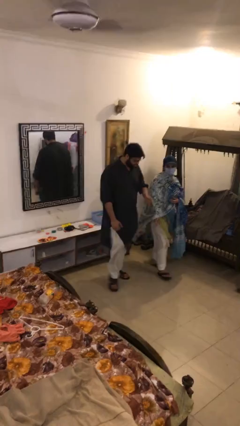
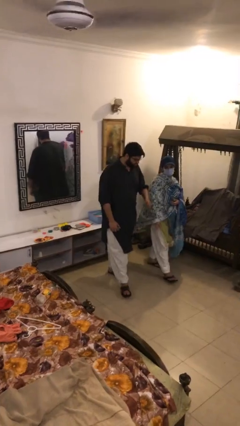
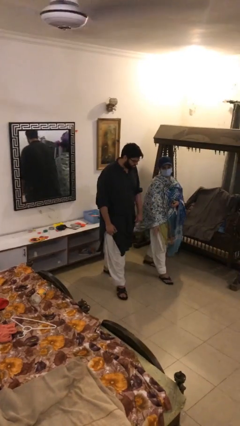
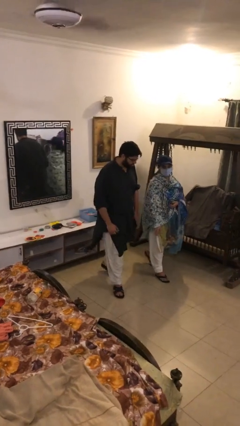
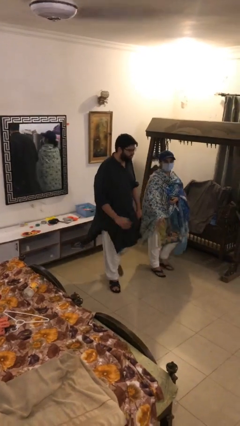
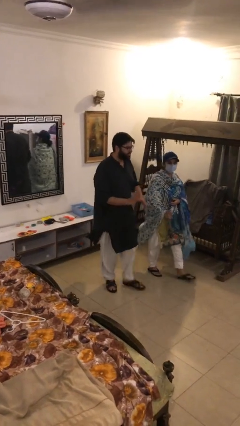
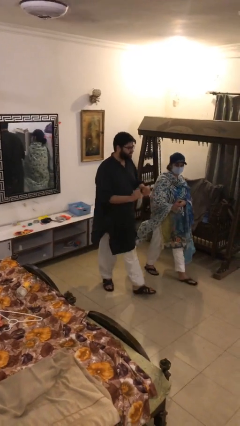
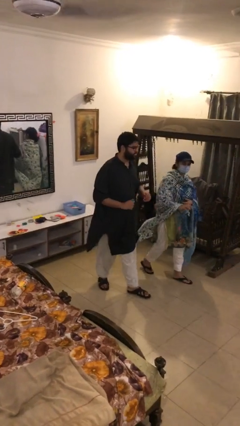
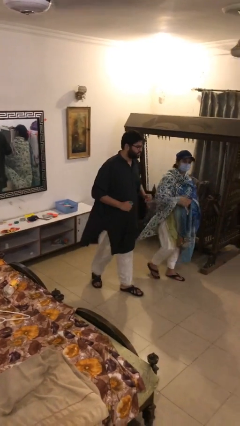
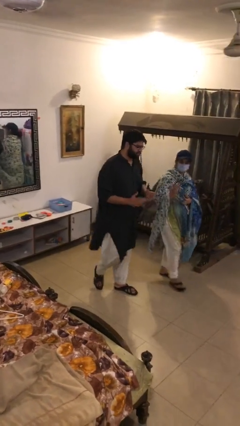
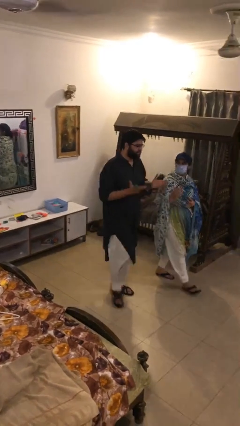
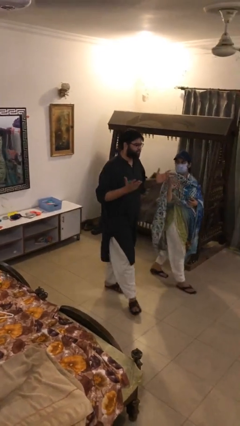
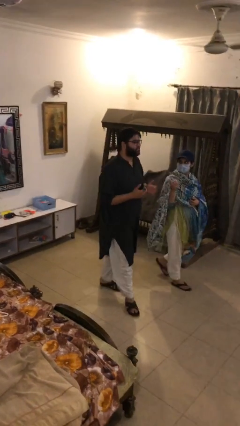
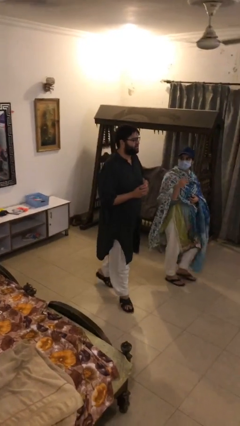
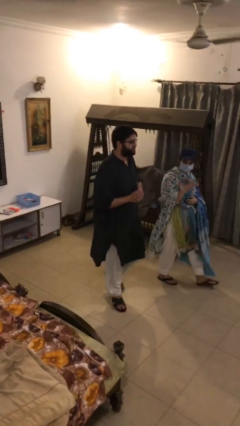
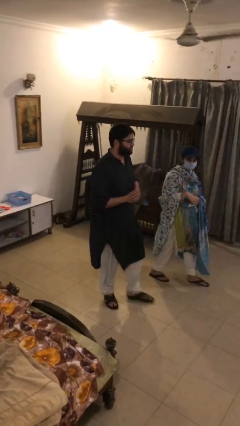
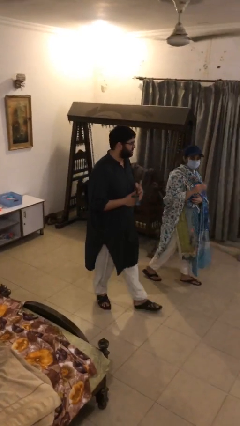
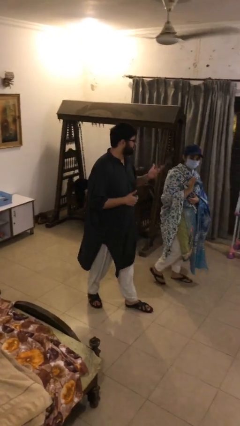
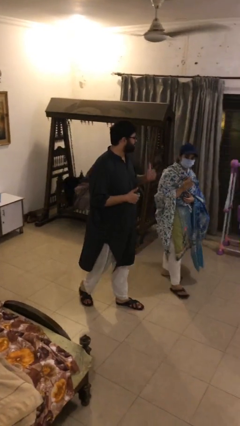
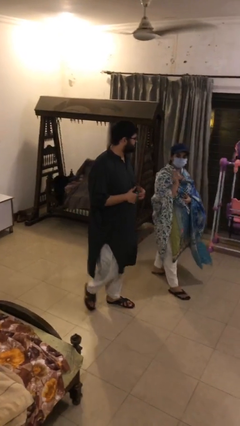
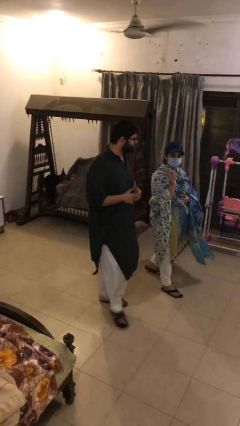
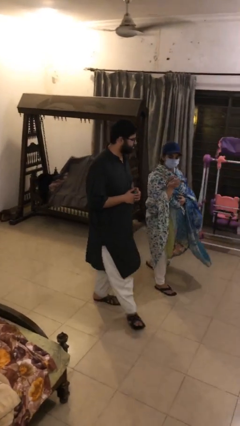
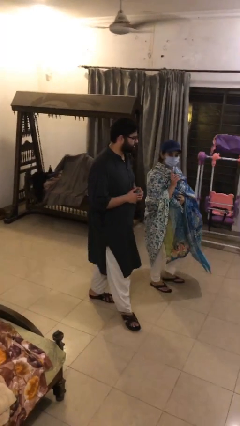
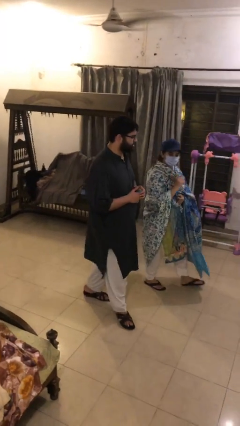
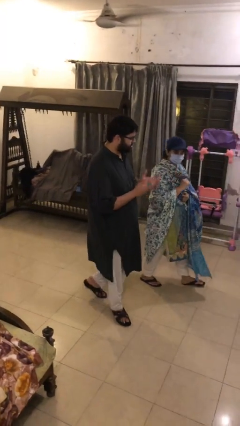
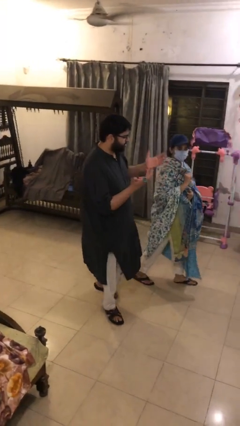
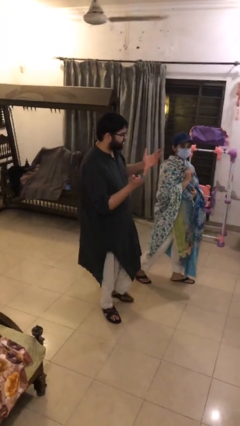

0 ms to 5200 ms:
person talks to person

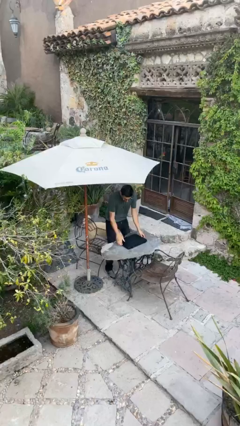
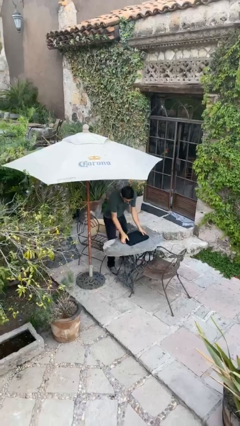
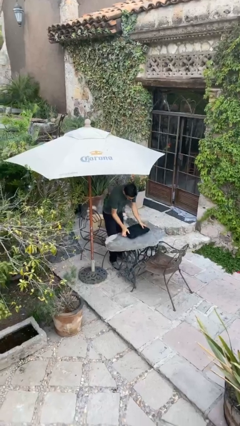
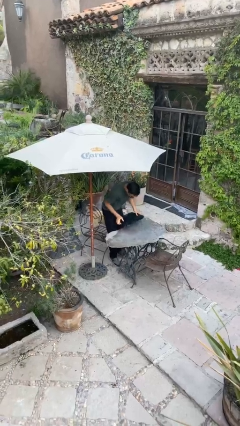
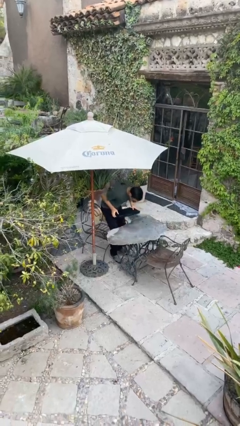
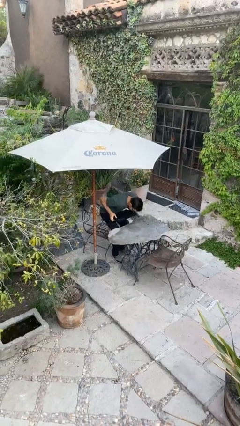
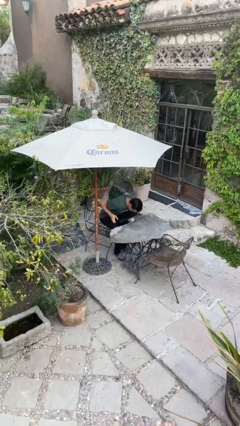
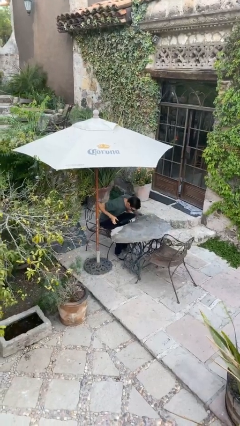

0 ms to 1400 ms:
person sits down

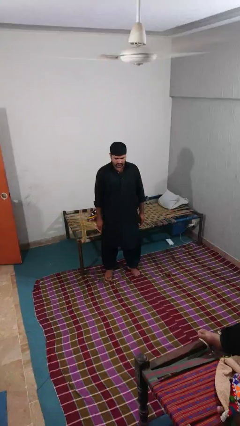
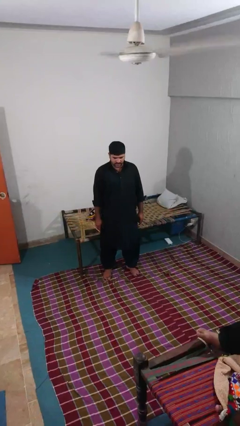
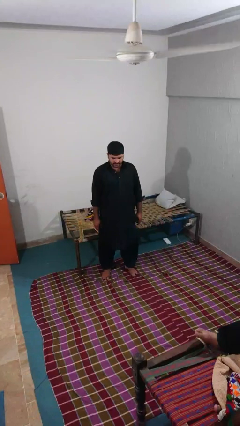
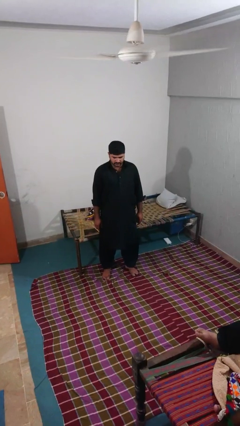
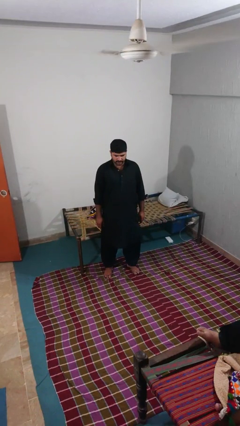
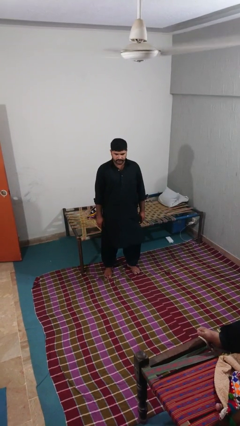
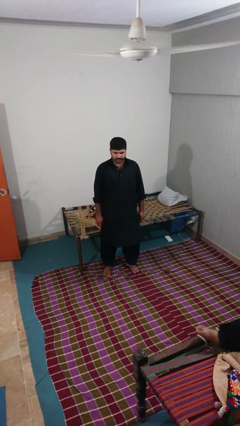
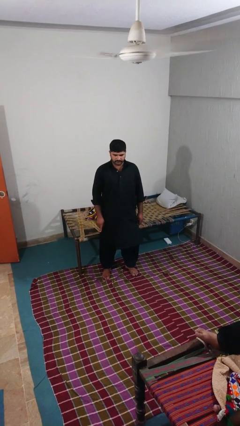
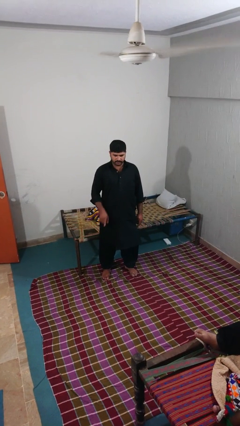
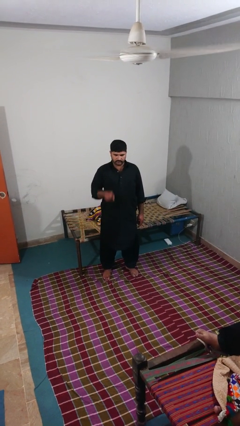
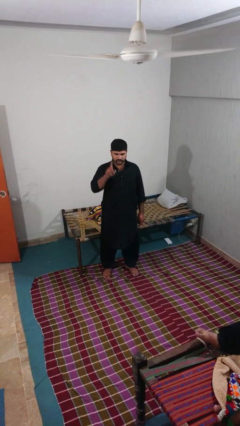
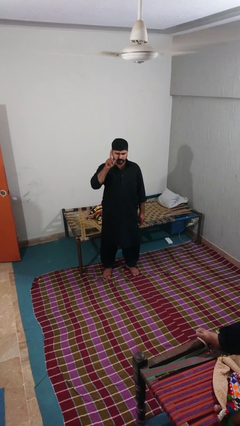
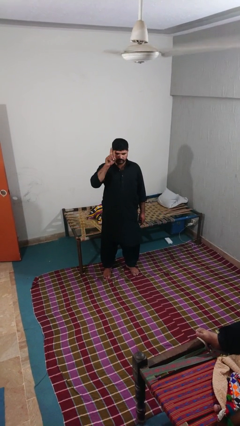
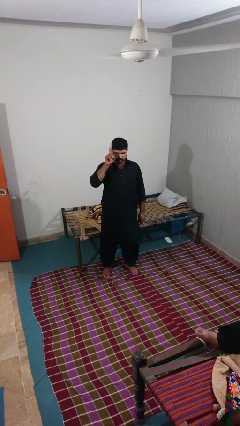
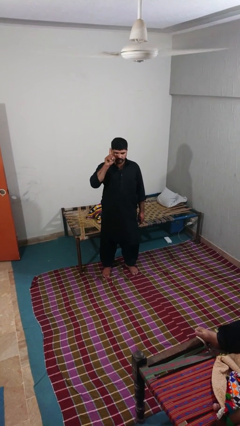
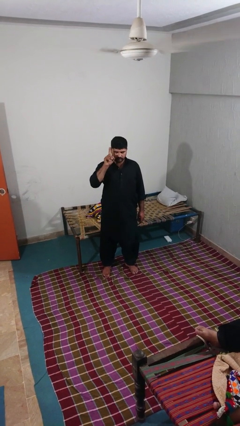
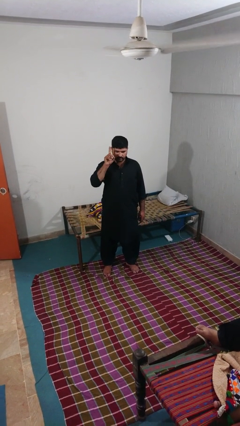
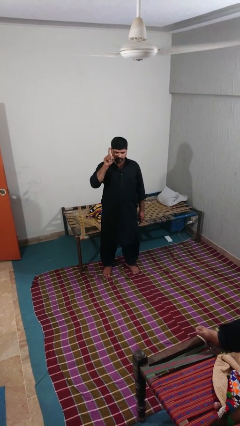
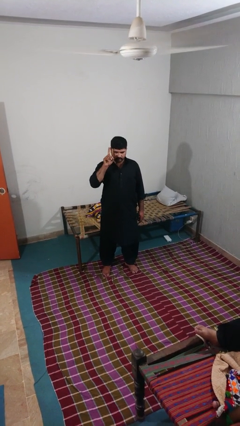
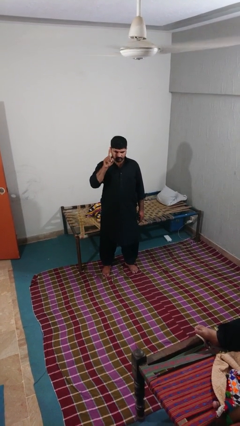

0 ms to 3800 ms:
person gestures swipe up

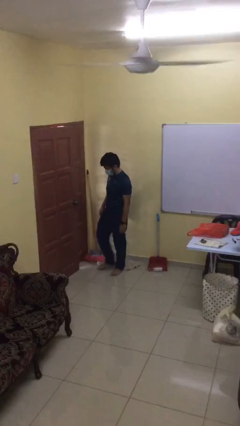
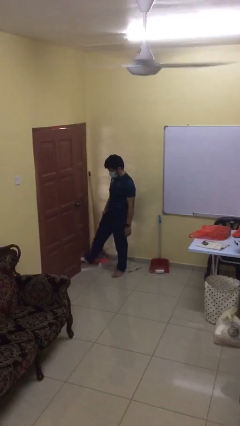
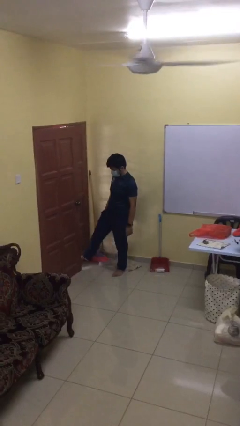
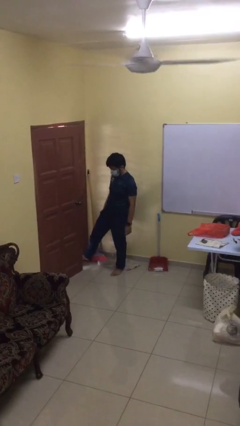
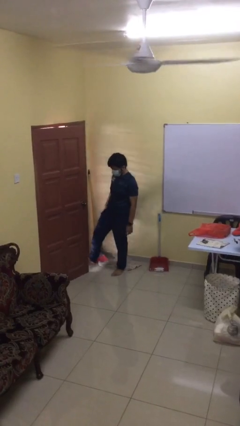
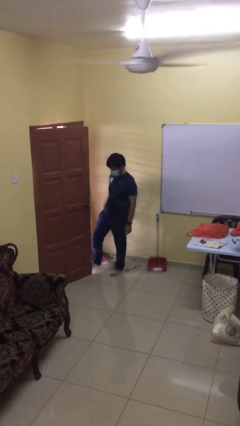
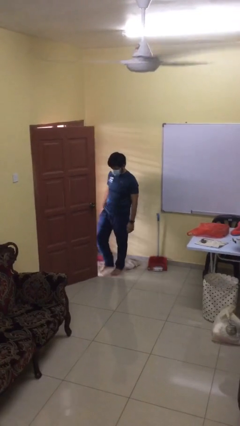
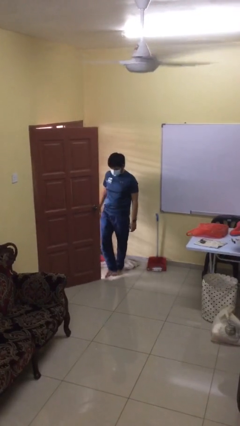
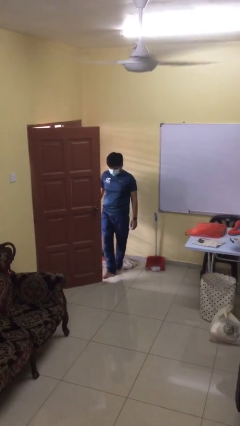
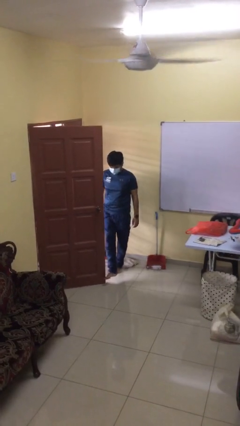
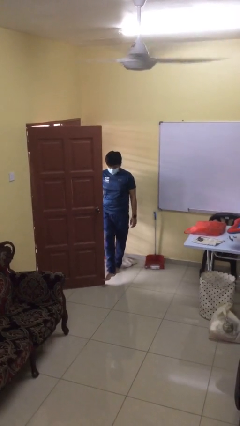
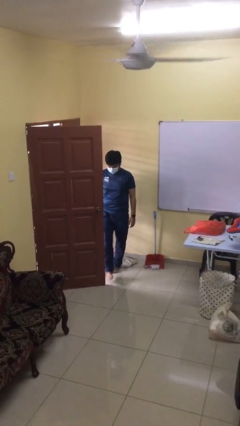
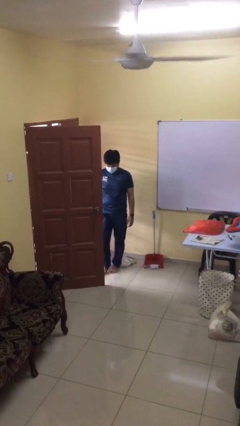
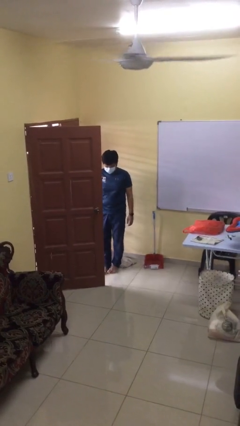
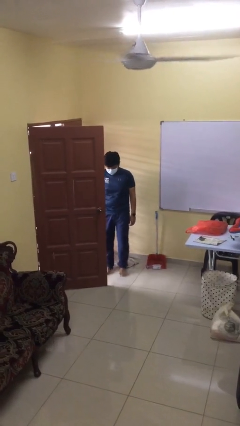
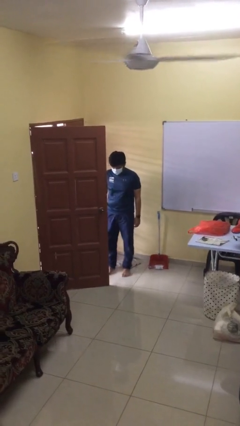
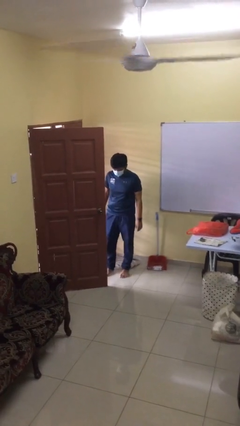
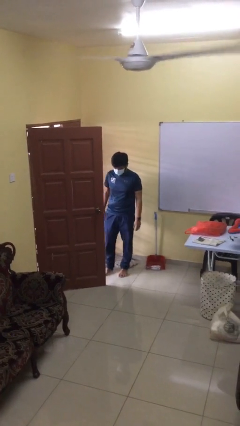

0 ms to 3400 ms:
person opens facility door

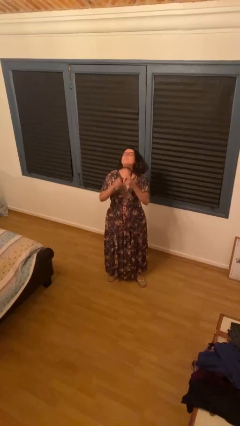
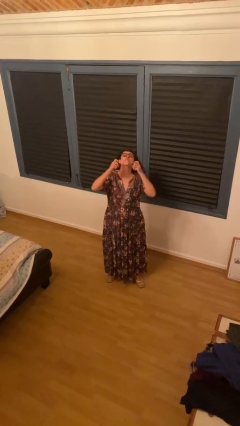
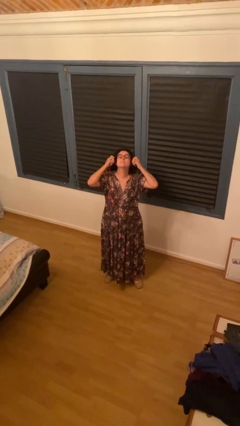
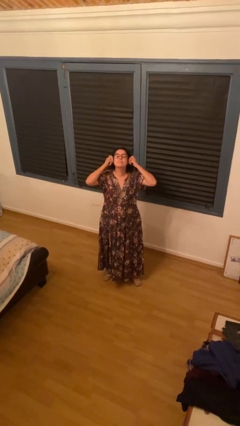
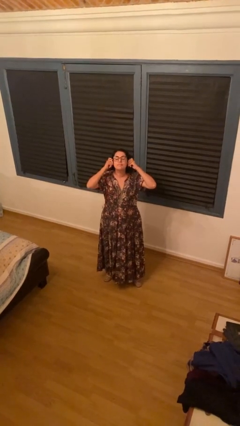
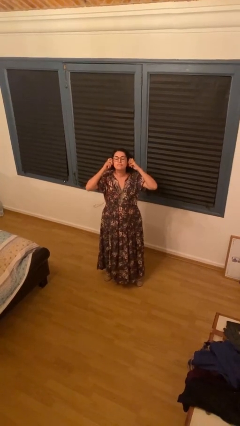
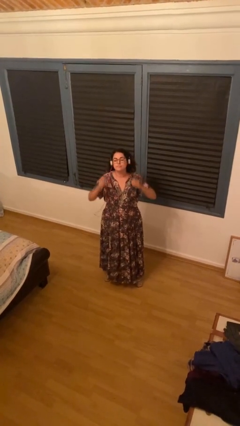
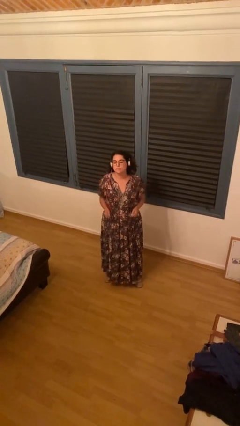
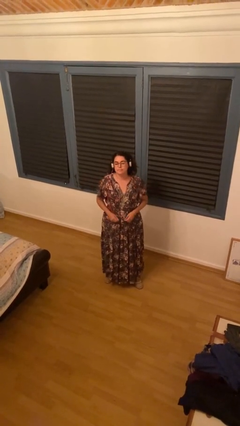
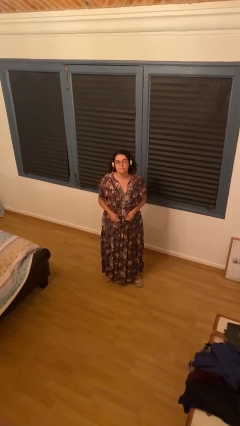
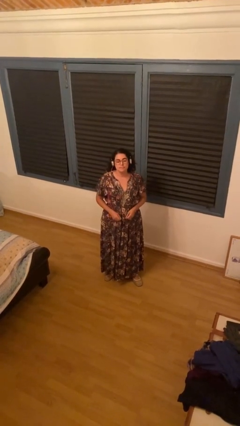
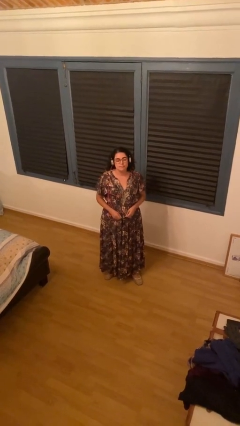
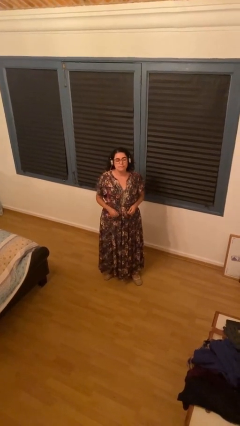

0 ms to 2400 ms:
person puts on headphones

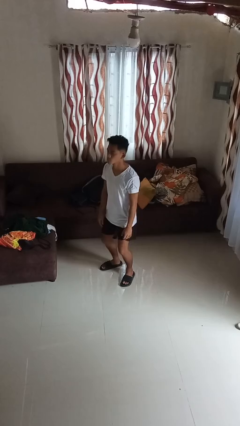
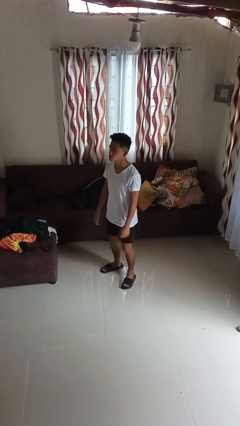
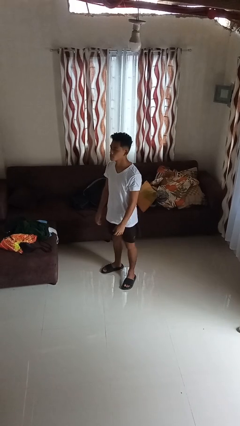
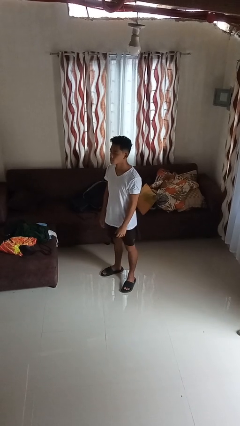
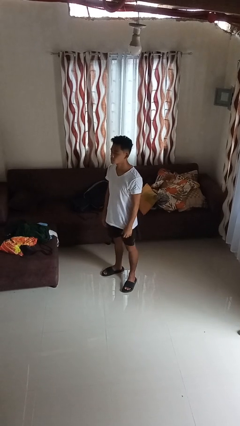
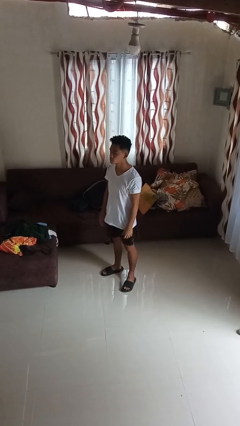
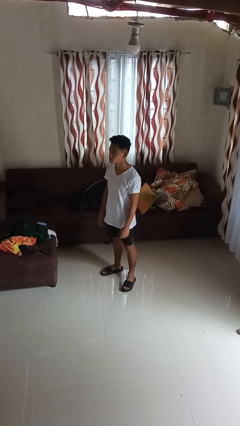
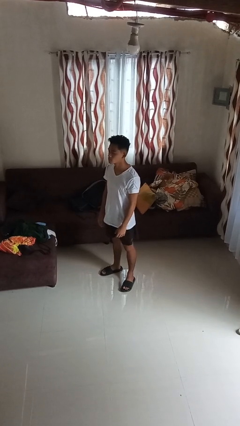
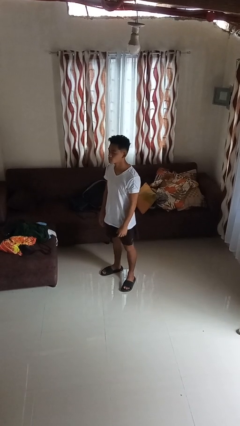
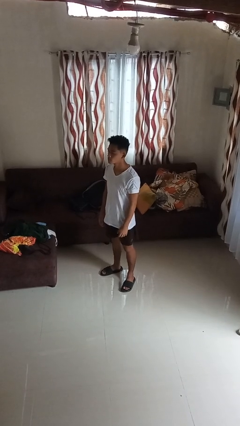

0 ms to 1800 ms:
person stands up
